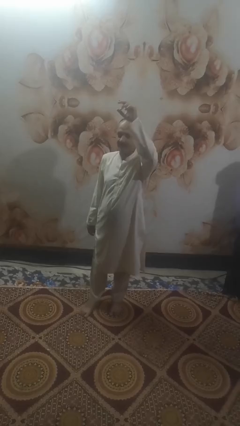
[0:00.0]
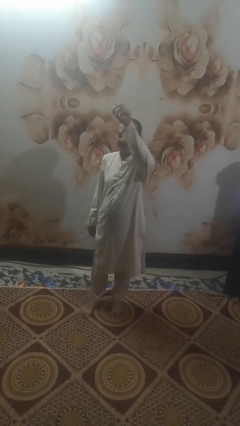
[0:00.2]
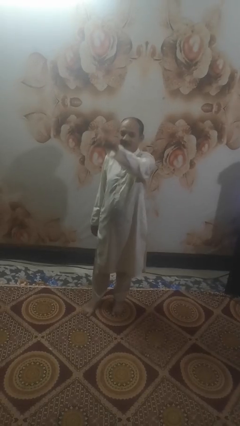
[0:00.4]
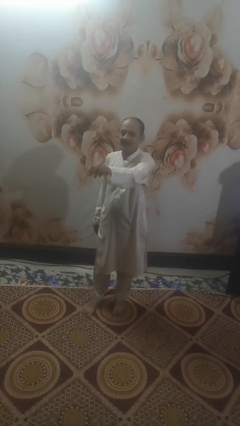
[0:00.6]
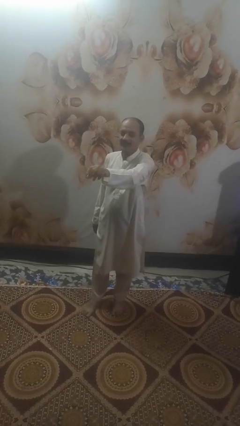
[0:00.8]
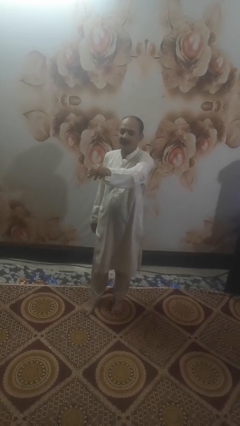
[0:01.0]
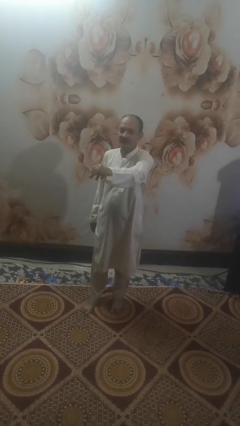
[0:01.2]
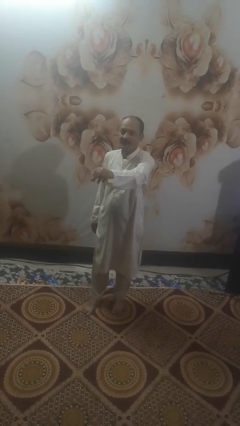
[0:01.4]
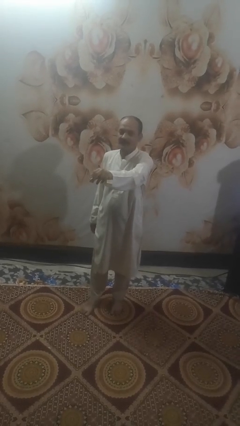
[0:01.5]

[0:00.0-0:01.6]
person gestures swipe down

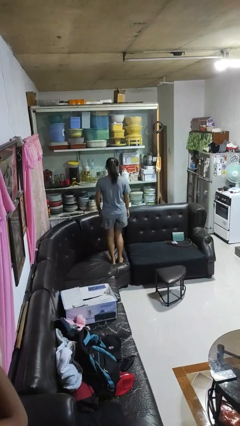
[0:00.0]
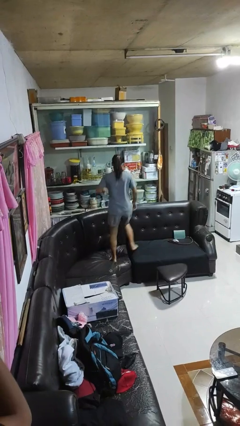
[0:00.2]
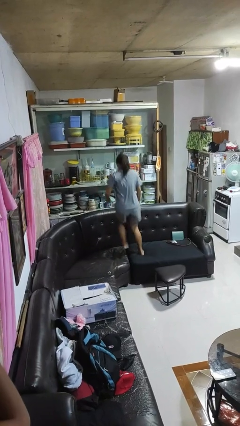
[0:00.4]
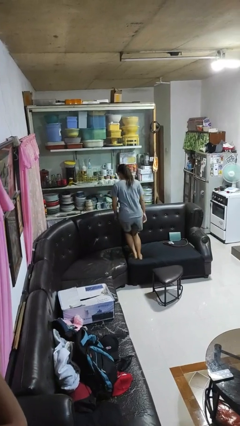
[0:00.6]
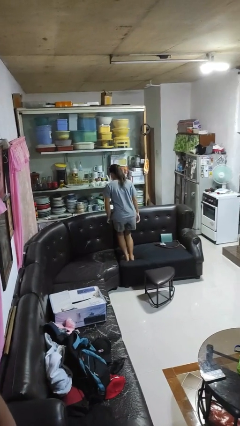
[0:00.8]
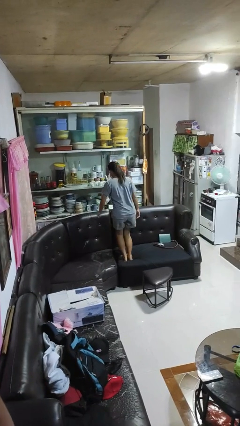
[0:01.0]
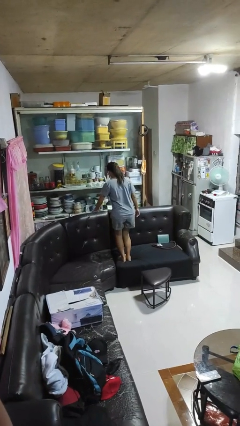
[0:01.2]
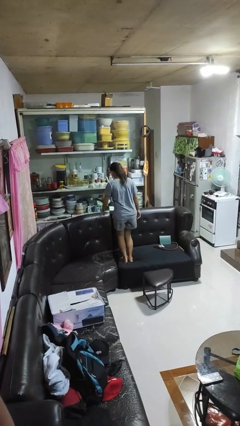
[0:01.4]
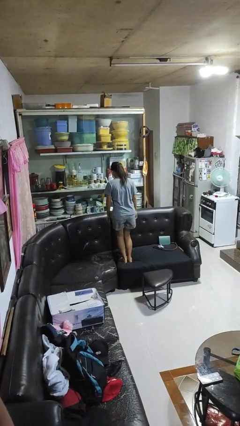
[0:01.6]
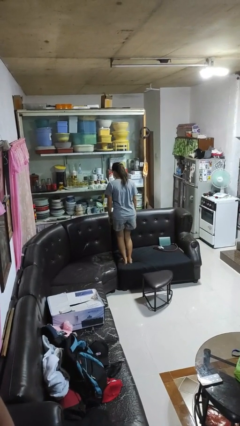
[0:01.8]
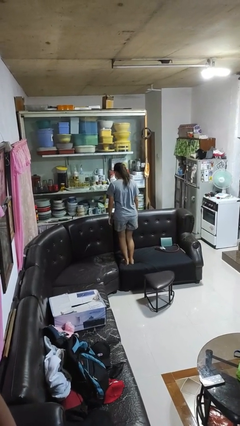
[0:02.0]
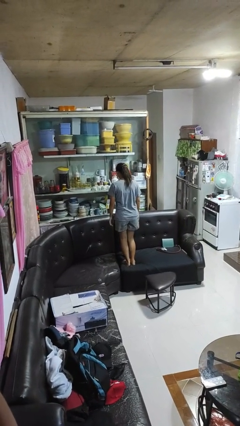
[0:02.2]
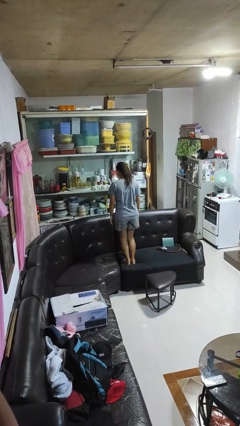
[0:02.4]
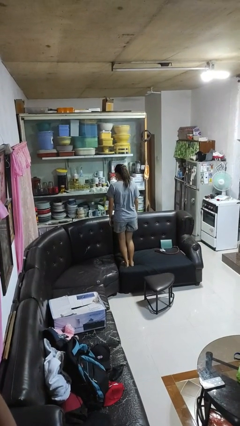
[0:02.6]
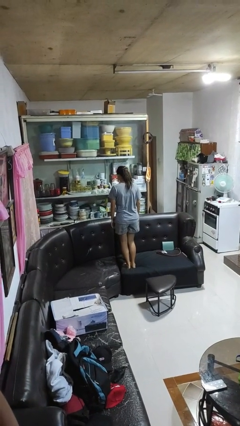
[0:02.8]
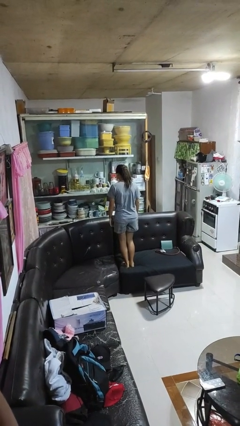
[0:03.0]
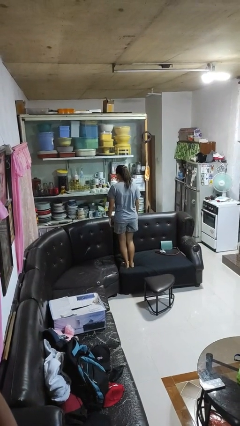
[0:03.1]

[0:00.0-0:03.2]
person jumps on couch

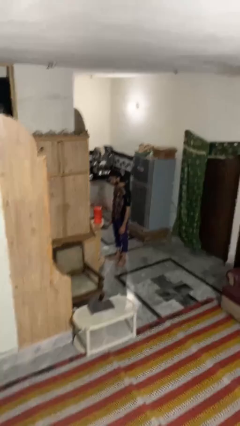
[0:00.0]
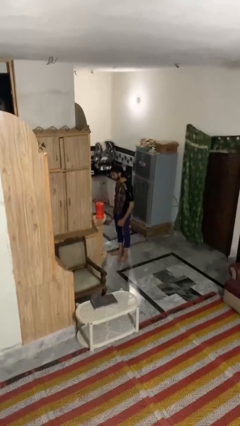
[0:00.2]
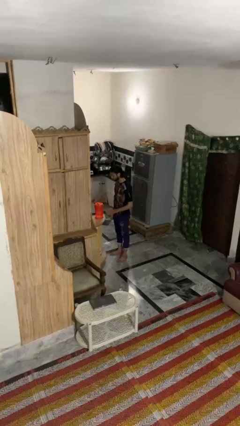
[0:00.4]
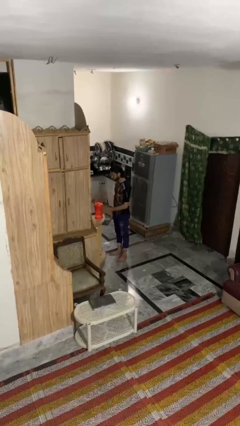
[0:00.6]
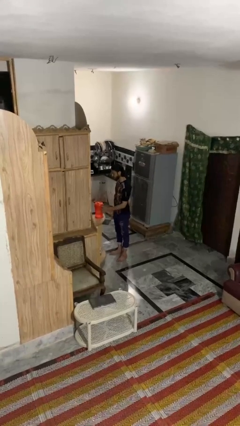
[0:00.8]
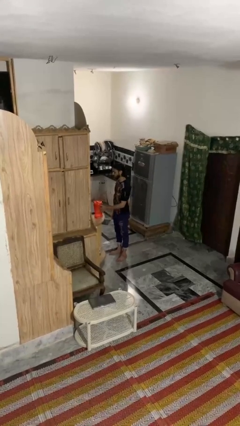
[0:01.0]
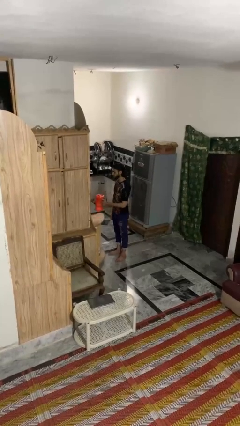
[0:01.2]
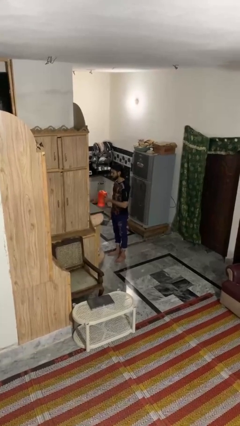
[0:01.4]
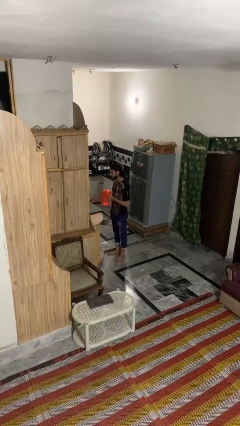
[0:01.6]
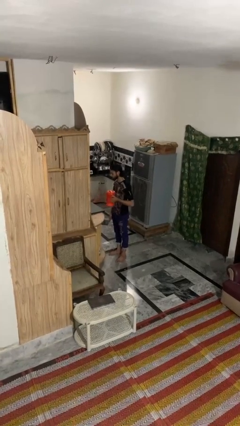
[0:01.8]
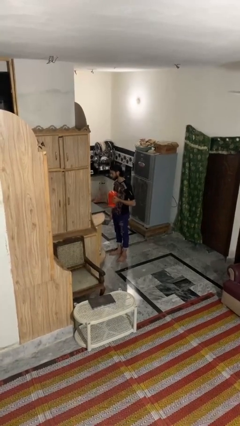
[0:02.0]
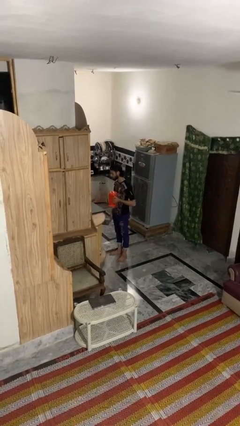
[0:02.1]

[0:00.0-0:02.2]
person picks up object from countertop

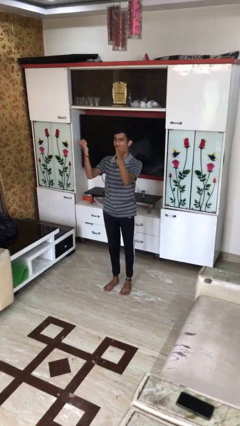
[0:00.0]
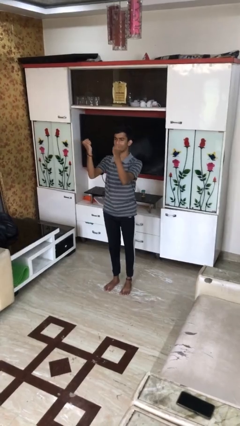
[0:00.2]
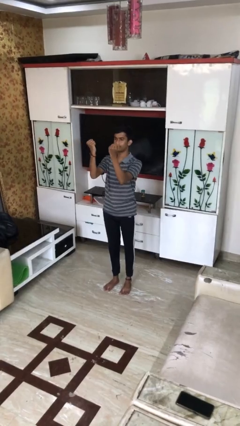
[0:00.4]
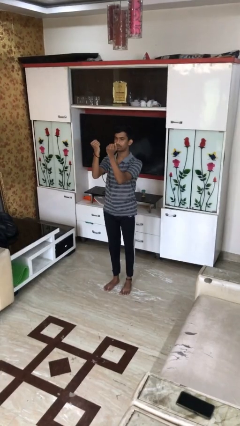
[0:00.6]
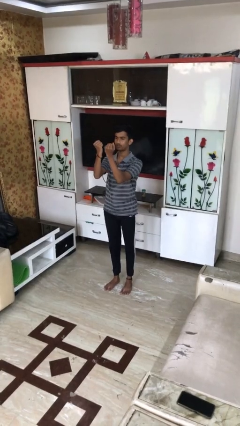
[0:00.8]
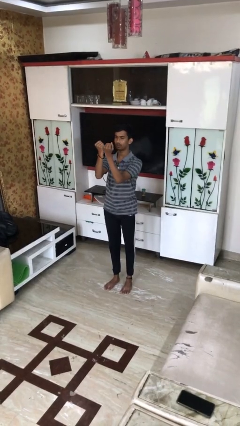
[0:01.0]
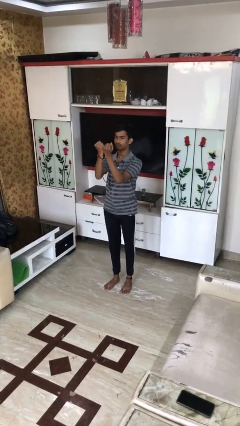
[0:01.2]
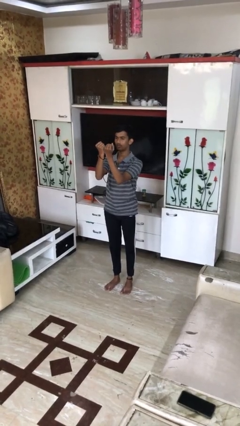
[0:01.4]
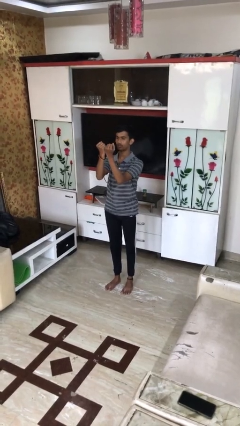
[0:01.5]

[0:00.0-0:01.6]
person gestures zoom out

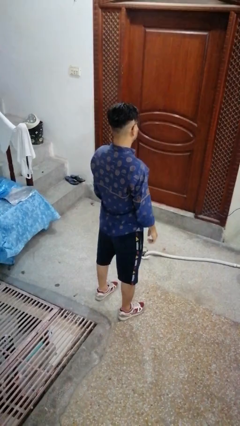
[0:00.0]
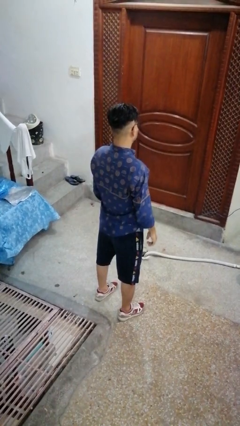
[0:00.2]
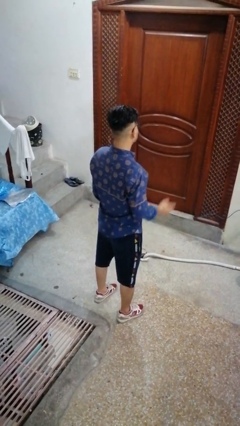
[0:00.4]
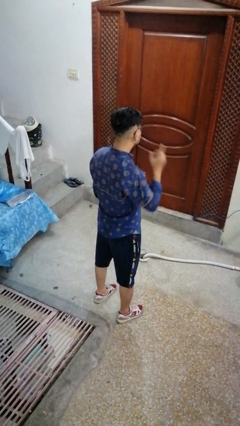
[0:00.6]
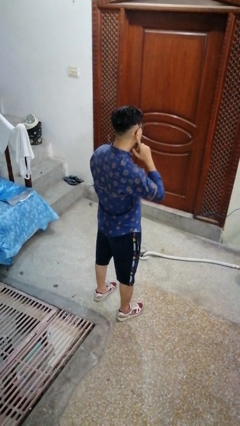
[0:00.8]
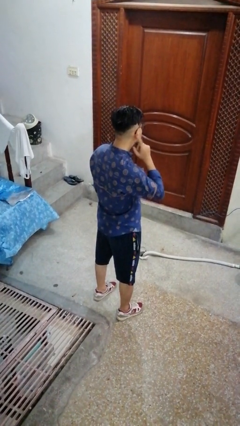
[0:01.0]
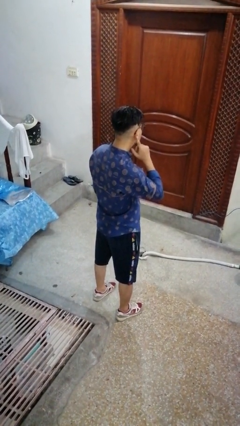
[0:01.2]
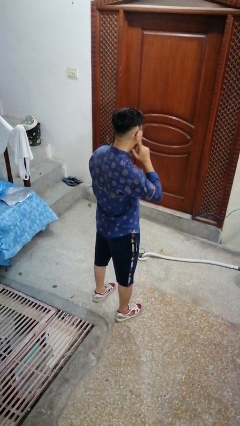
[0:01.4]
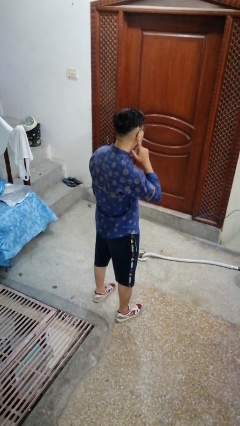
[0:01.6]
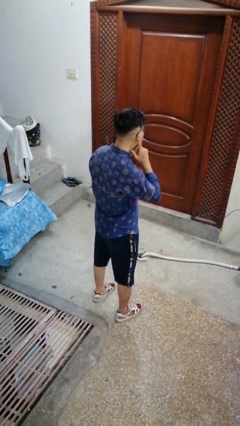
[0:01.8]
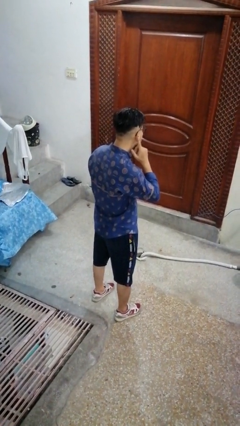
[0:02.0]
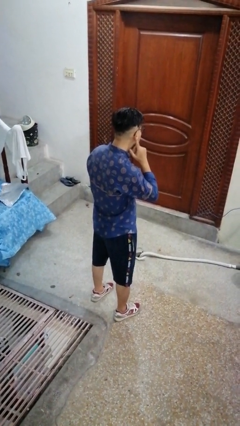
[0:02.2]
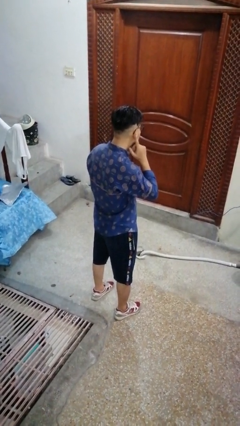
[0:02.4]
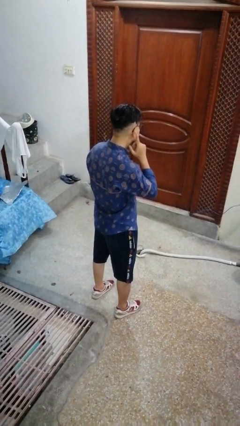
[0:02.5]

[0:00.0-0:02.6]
person gestures listen closely

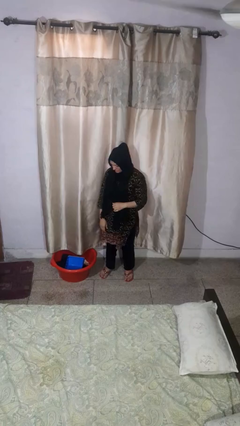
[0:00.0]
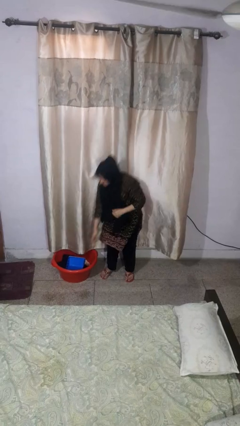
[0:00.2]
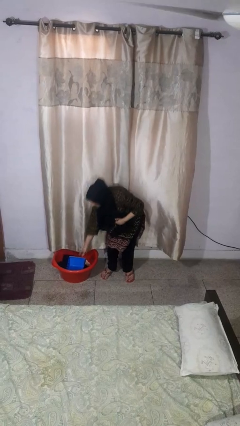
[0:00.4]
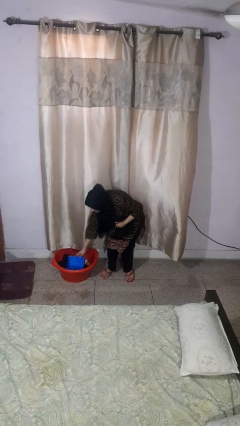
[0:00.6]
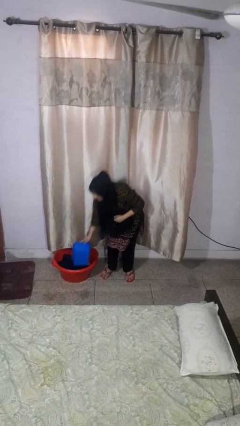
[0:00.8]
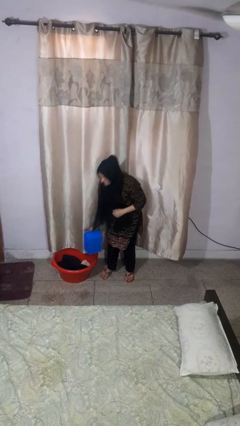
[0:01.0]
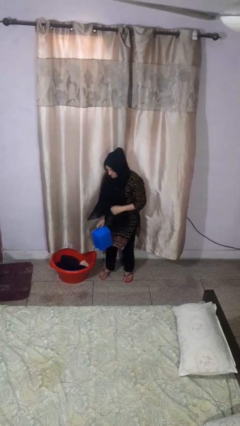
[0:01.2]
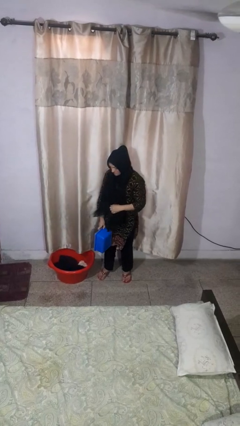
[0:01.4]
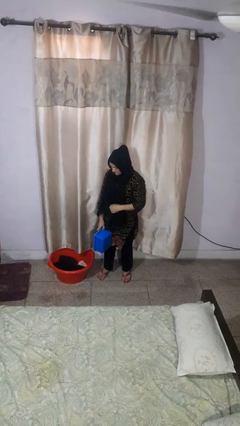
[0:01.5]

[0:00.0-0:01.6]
person takes object from basket

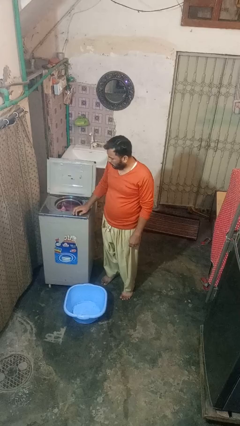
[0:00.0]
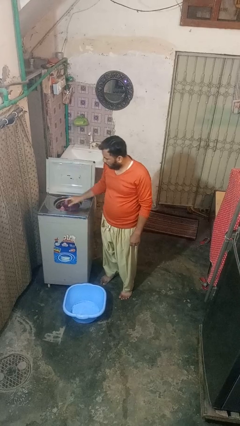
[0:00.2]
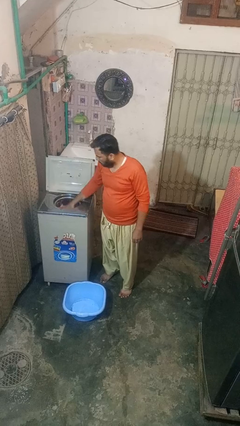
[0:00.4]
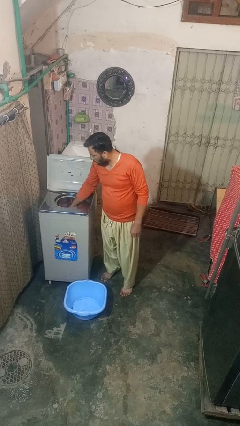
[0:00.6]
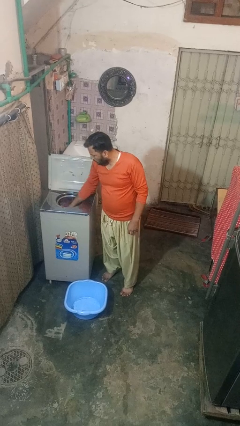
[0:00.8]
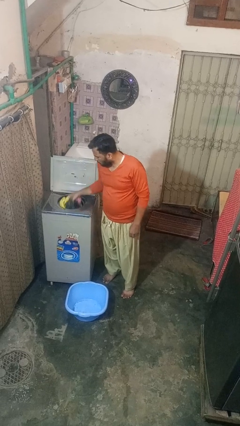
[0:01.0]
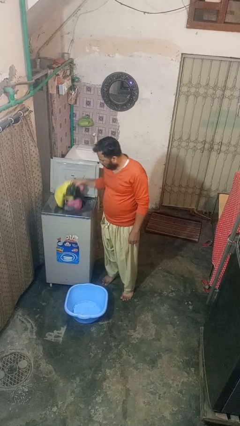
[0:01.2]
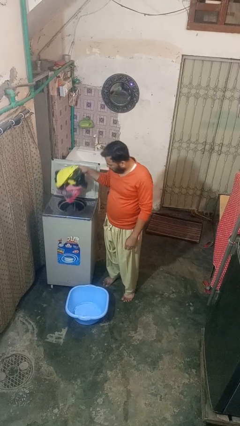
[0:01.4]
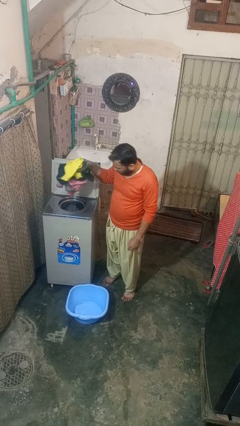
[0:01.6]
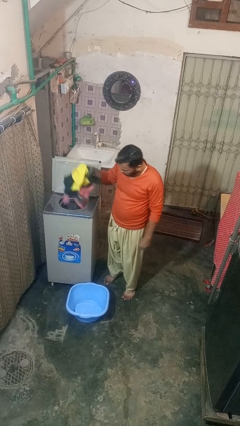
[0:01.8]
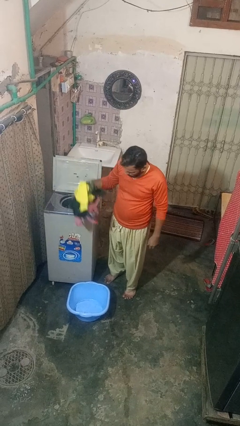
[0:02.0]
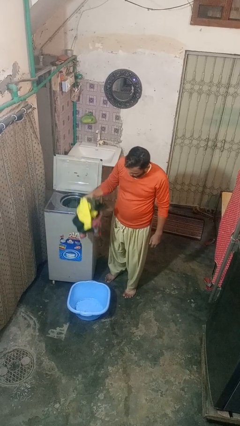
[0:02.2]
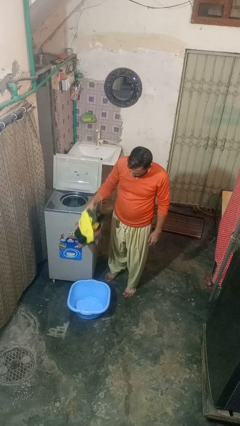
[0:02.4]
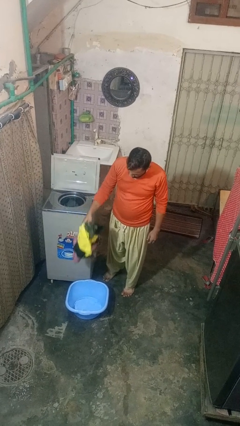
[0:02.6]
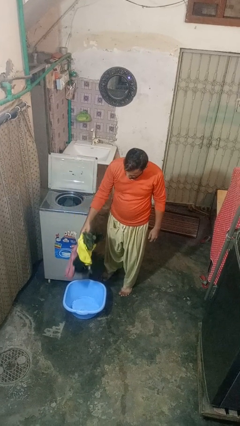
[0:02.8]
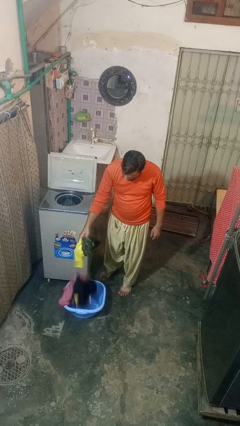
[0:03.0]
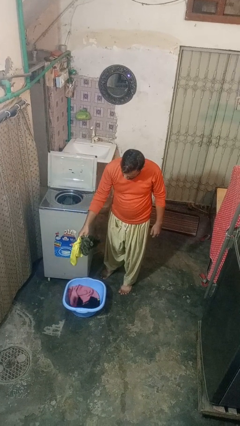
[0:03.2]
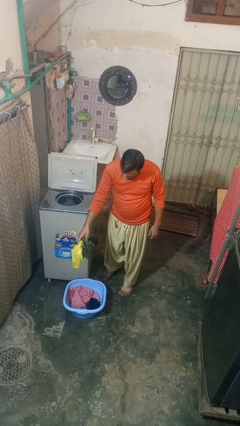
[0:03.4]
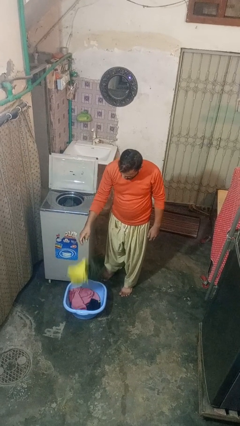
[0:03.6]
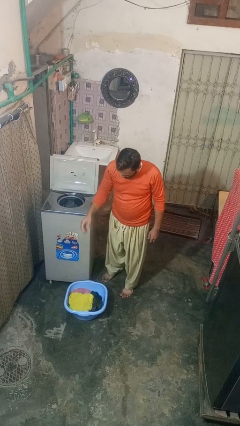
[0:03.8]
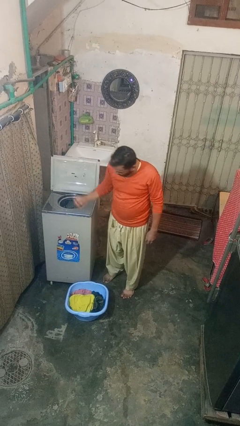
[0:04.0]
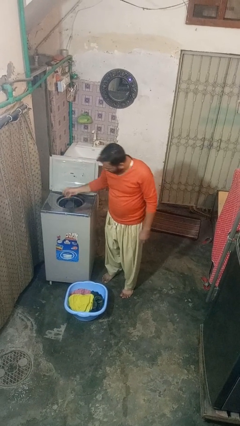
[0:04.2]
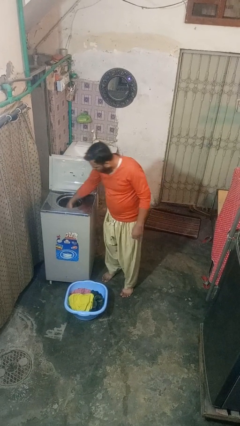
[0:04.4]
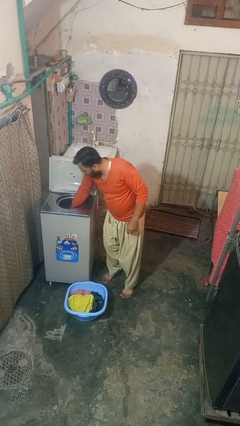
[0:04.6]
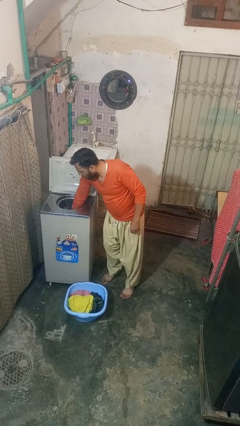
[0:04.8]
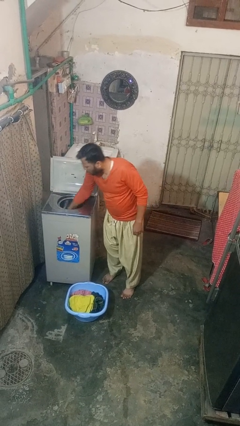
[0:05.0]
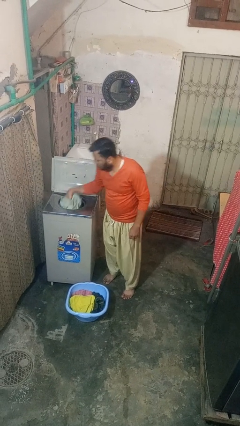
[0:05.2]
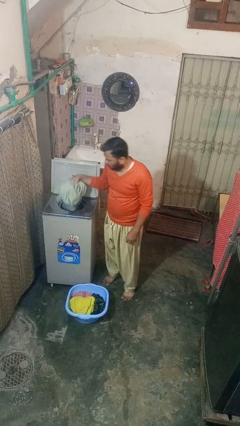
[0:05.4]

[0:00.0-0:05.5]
person unloads dryer
